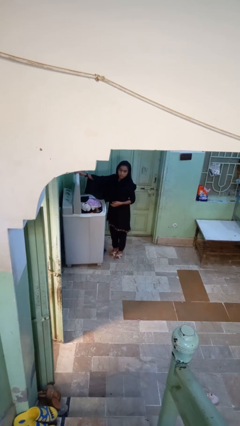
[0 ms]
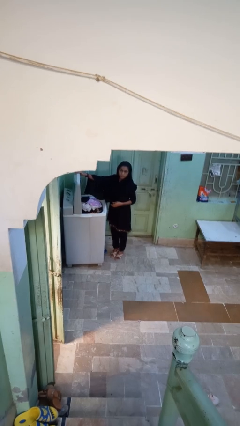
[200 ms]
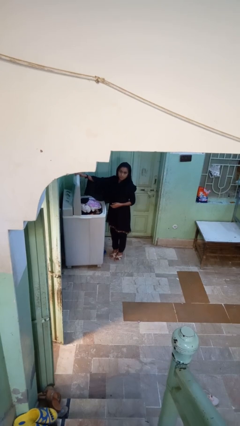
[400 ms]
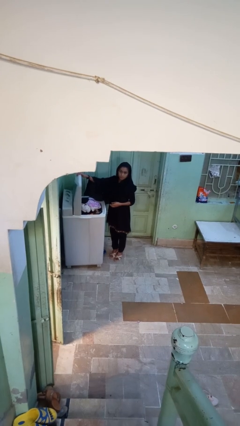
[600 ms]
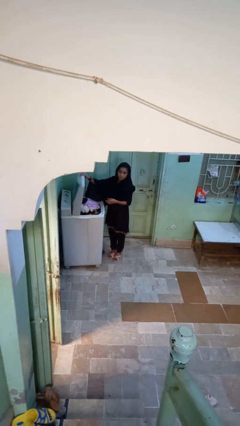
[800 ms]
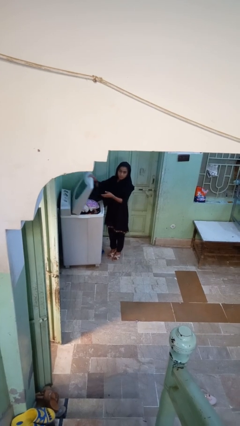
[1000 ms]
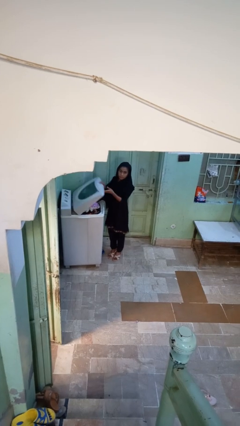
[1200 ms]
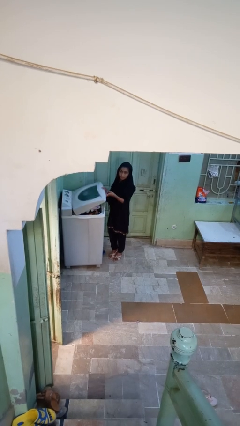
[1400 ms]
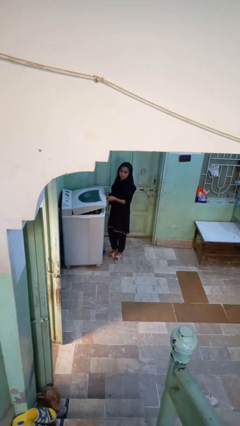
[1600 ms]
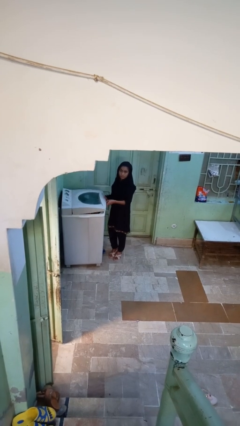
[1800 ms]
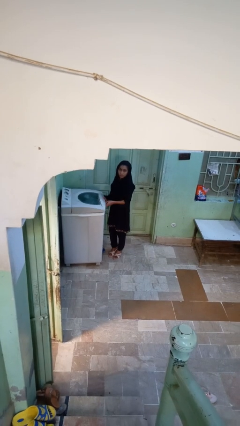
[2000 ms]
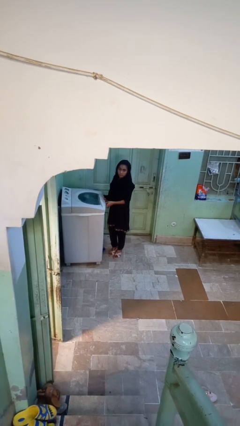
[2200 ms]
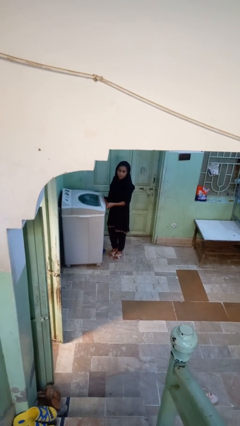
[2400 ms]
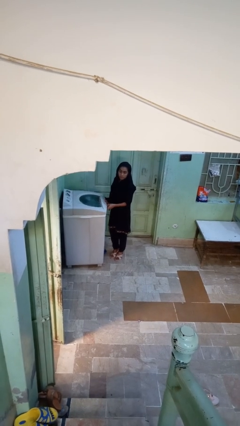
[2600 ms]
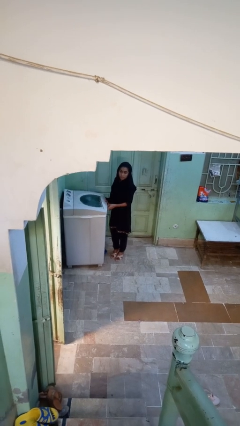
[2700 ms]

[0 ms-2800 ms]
person closes clothes washer

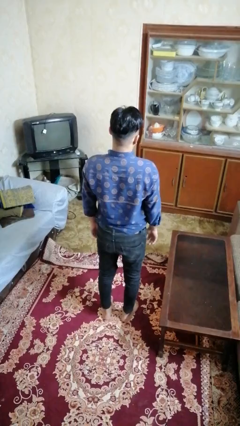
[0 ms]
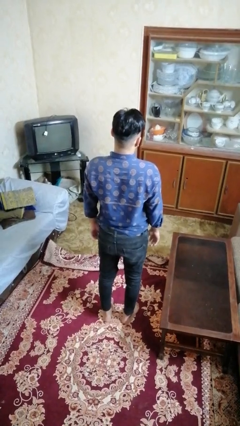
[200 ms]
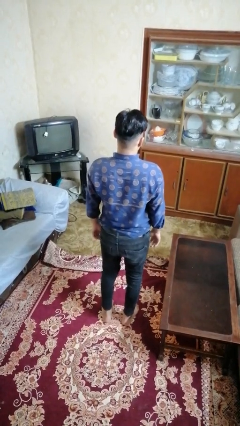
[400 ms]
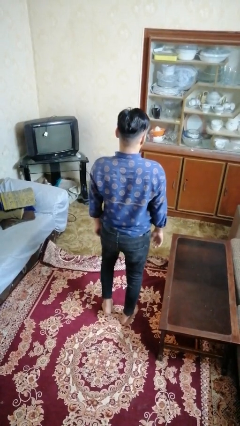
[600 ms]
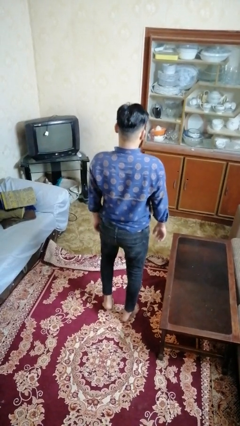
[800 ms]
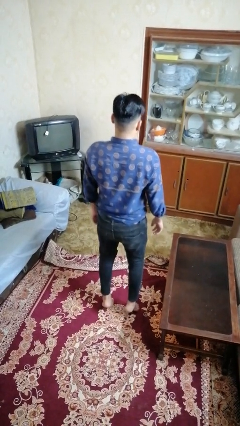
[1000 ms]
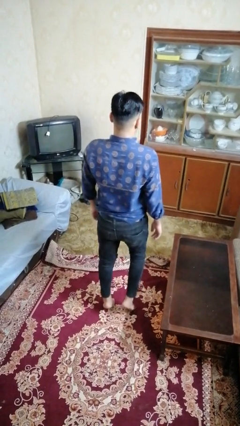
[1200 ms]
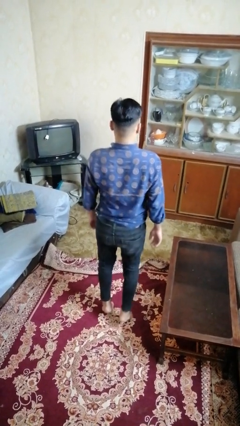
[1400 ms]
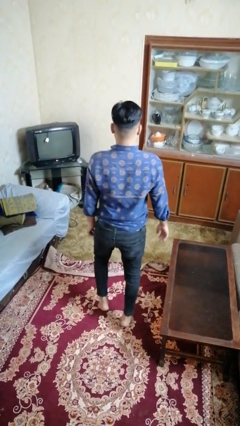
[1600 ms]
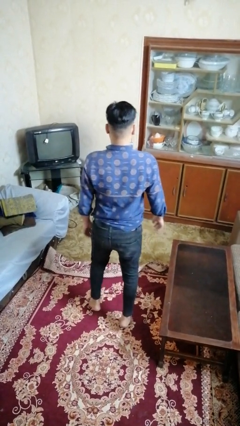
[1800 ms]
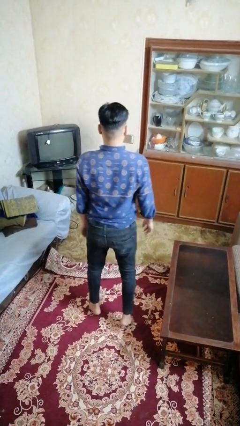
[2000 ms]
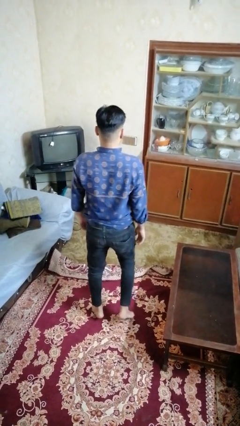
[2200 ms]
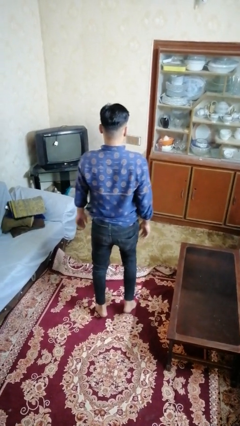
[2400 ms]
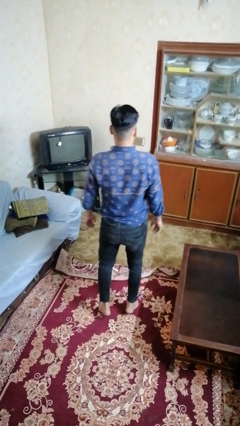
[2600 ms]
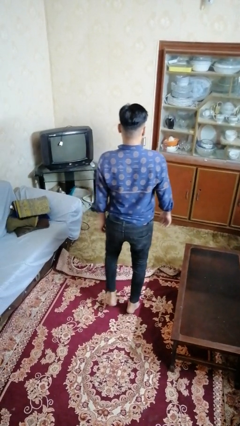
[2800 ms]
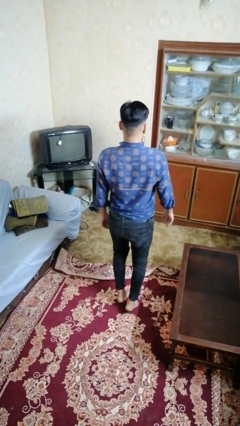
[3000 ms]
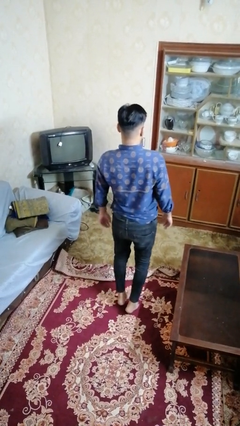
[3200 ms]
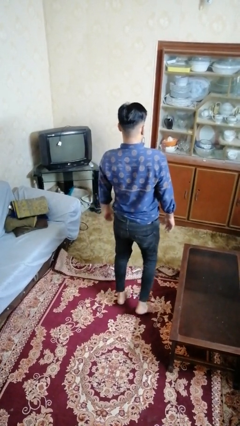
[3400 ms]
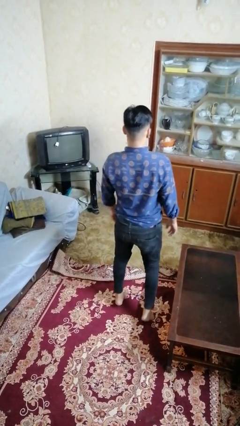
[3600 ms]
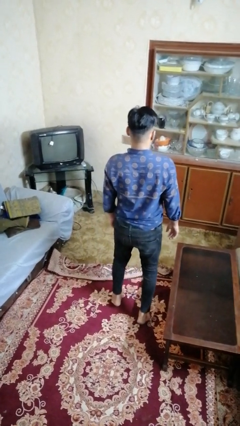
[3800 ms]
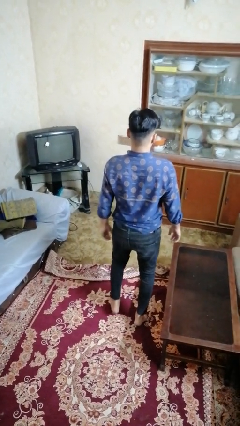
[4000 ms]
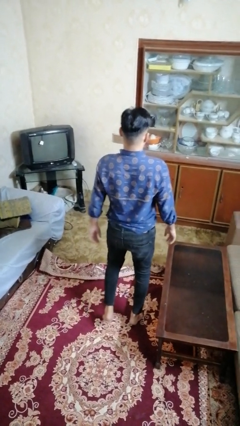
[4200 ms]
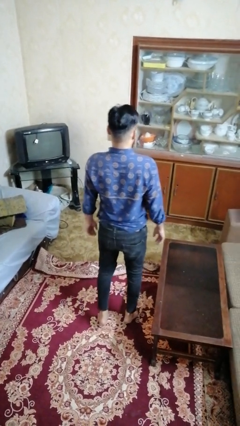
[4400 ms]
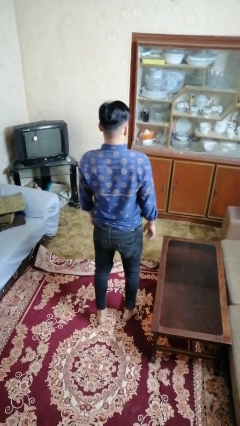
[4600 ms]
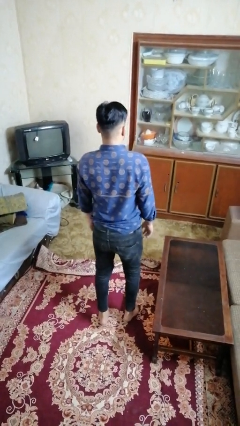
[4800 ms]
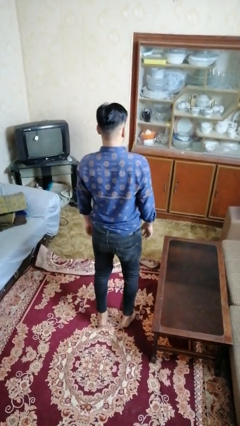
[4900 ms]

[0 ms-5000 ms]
person walks tiptoe

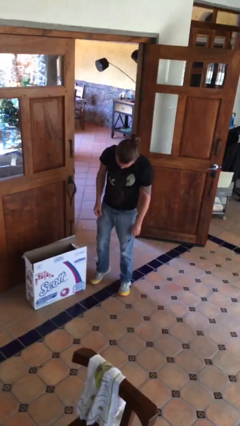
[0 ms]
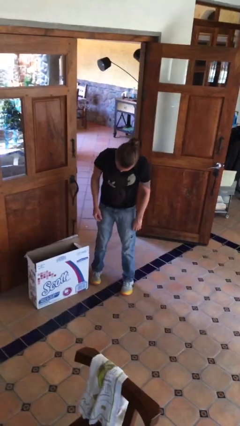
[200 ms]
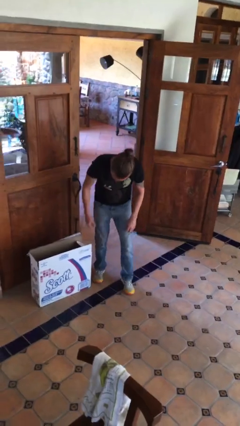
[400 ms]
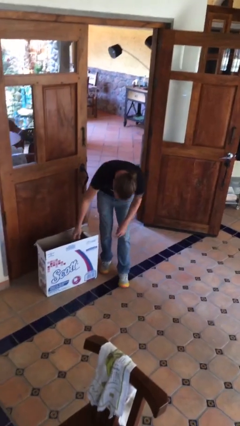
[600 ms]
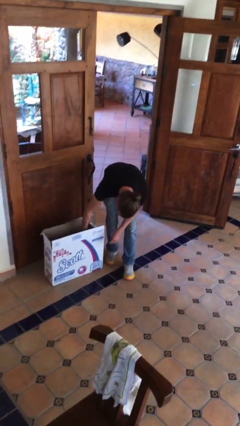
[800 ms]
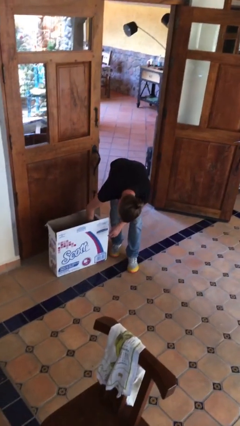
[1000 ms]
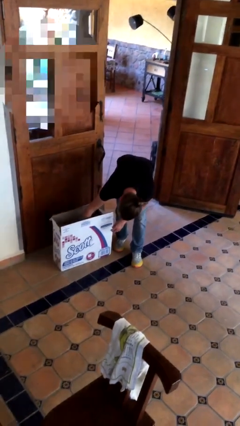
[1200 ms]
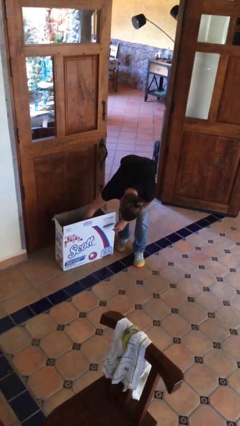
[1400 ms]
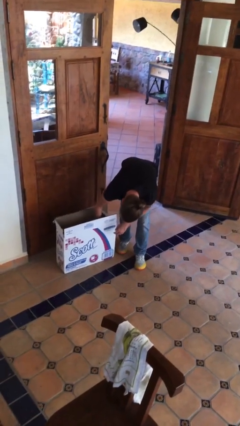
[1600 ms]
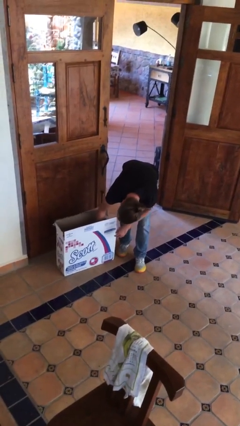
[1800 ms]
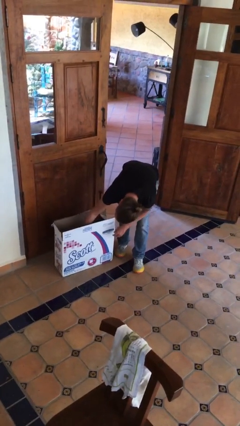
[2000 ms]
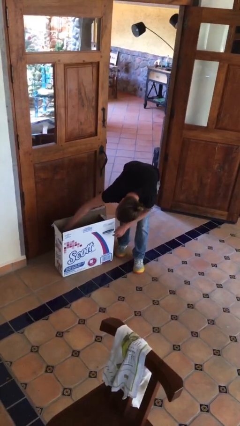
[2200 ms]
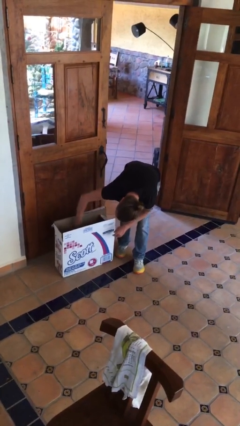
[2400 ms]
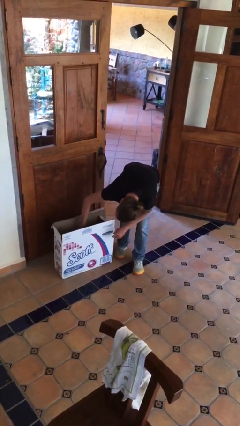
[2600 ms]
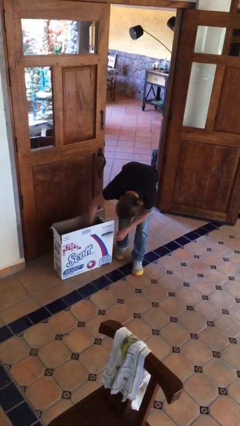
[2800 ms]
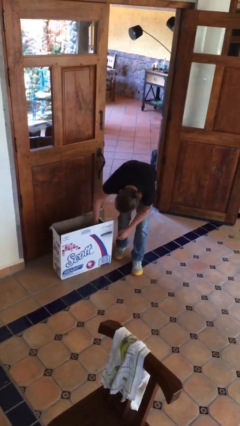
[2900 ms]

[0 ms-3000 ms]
person searches in box

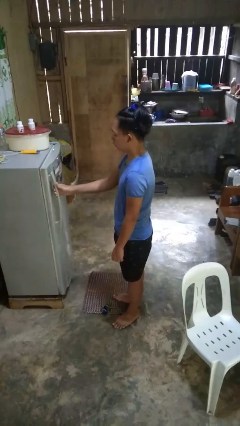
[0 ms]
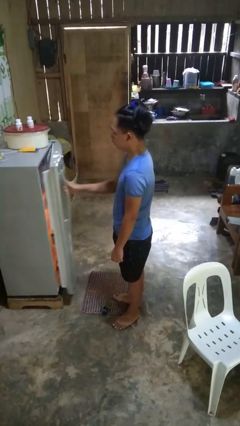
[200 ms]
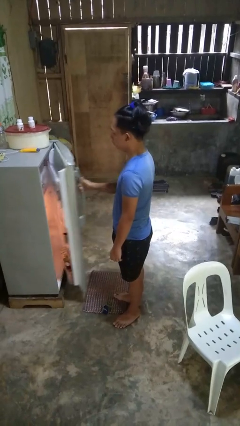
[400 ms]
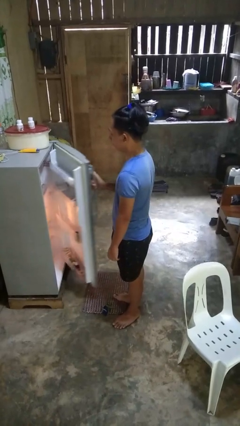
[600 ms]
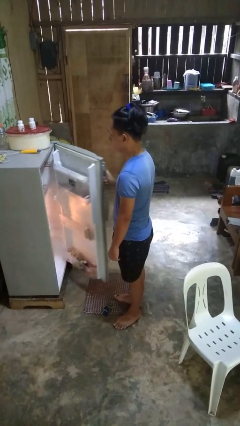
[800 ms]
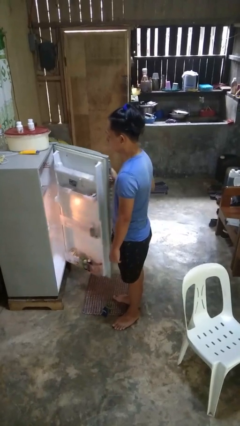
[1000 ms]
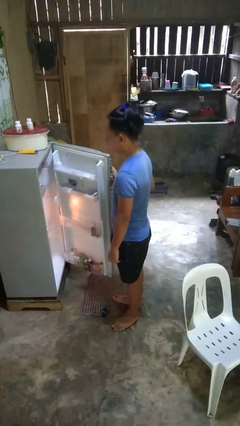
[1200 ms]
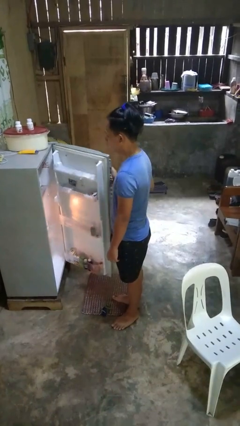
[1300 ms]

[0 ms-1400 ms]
person opens refrigerator

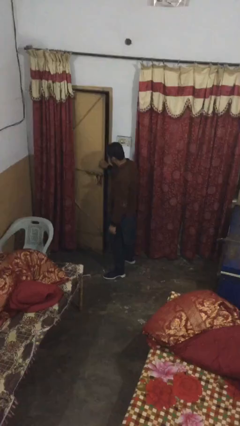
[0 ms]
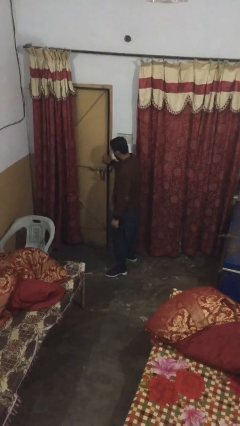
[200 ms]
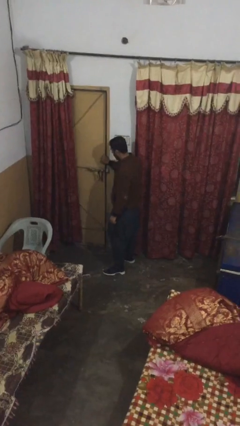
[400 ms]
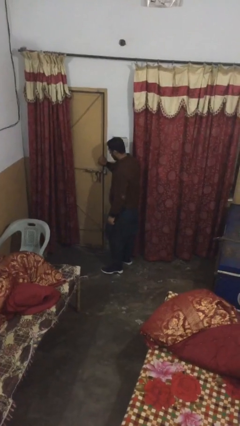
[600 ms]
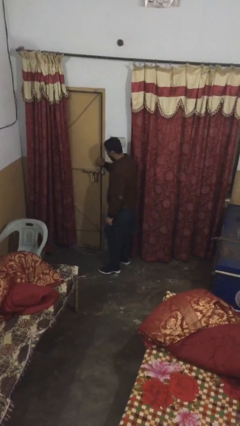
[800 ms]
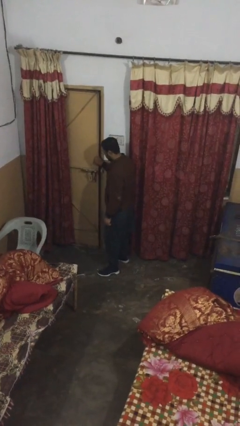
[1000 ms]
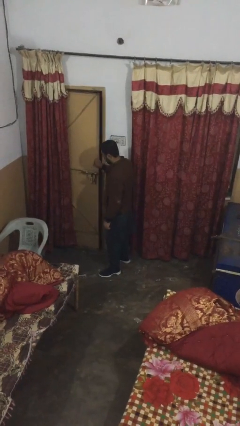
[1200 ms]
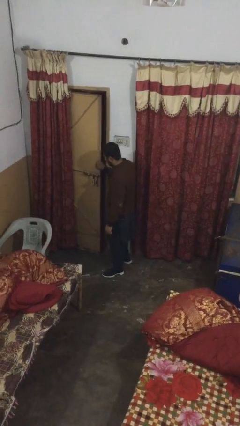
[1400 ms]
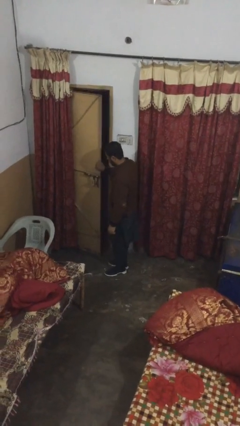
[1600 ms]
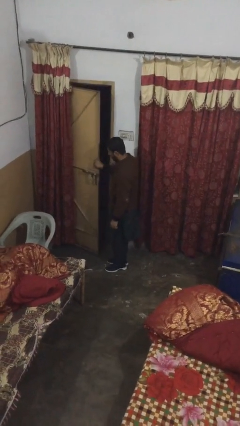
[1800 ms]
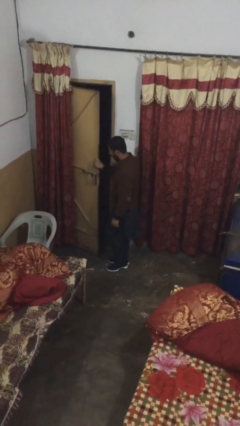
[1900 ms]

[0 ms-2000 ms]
person opens facility door

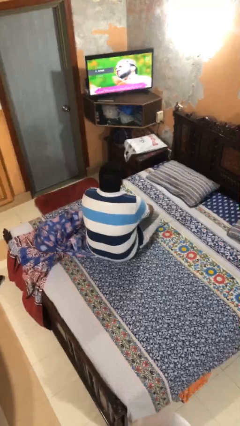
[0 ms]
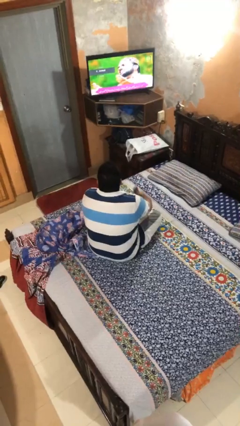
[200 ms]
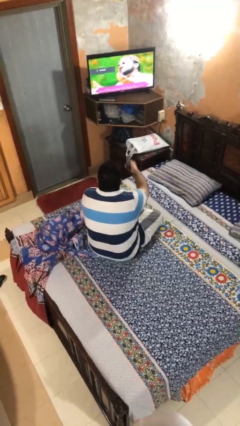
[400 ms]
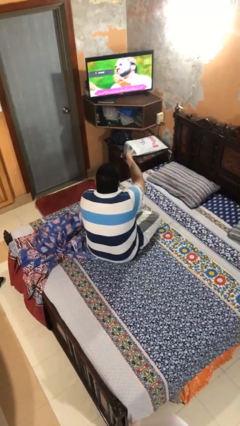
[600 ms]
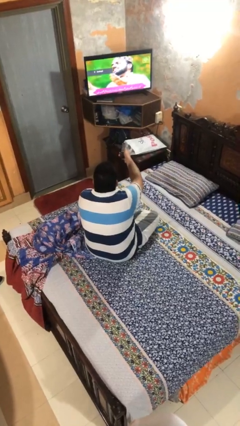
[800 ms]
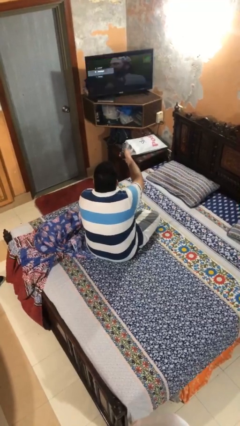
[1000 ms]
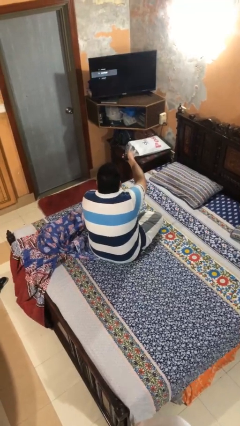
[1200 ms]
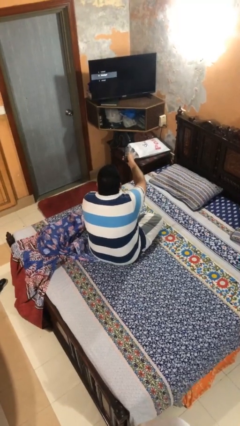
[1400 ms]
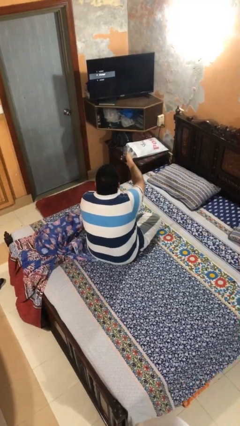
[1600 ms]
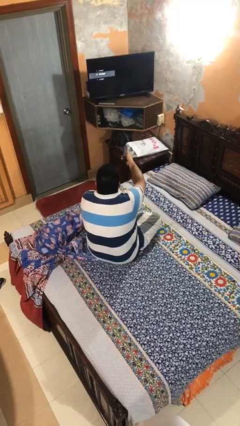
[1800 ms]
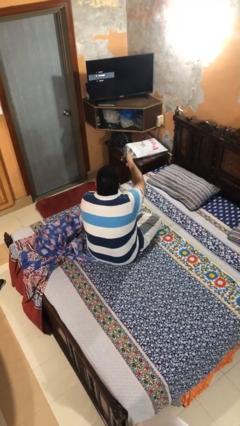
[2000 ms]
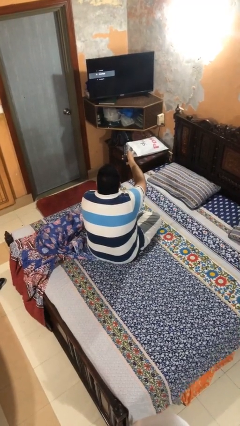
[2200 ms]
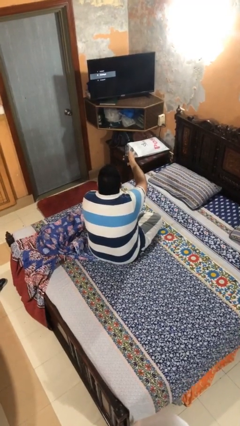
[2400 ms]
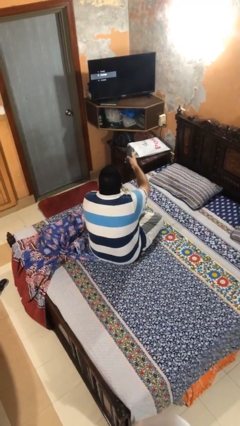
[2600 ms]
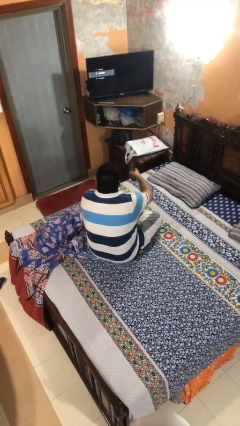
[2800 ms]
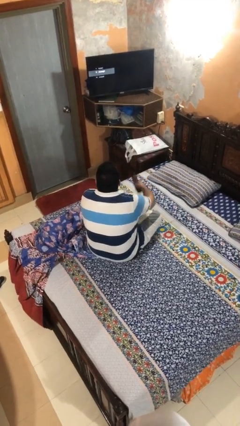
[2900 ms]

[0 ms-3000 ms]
person uses television remote

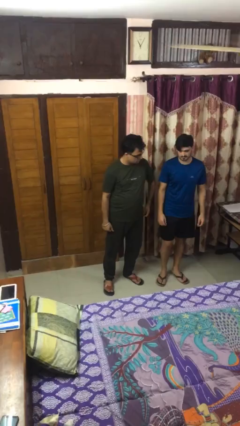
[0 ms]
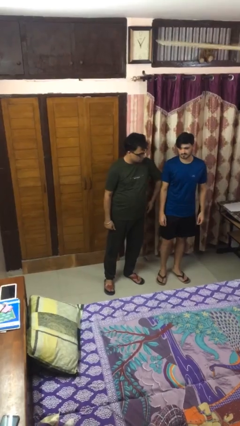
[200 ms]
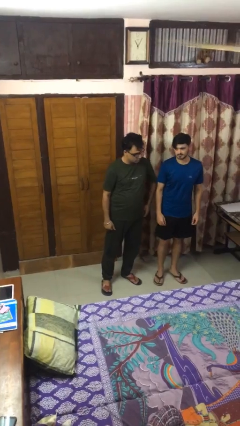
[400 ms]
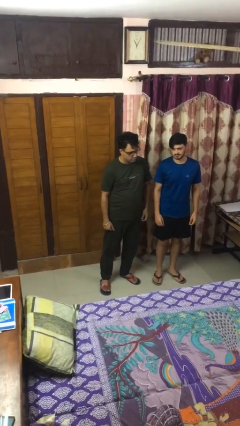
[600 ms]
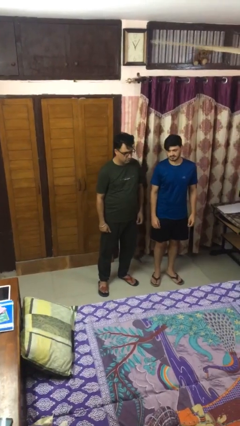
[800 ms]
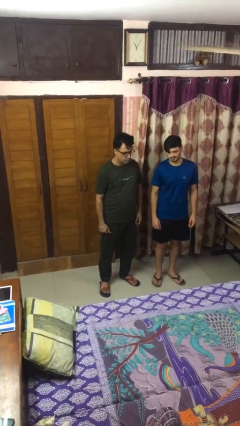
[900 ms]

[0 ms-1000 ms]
person nudges person with elbow
